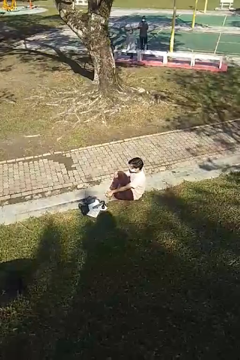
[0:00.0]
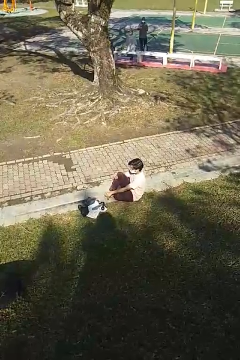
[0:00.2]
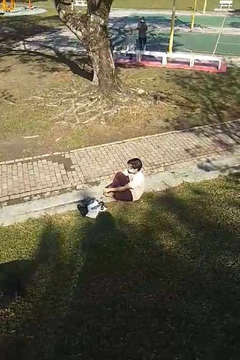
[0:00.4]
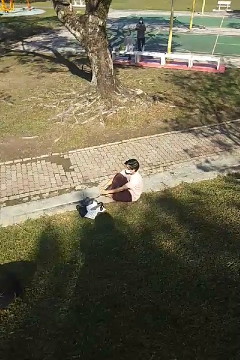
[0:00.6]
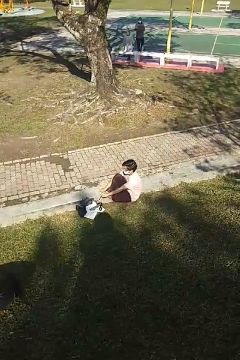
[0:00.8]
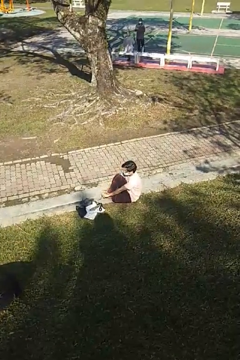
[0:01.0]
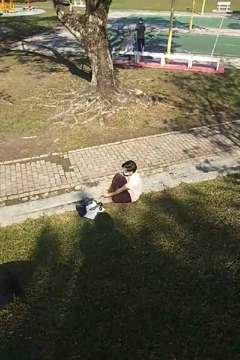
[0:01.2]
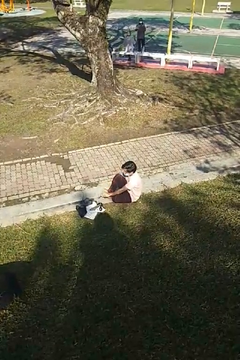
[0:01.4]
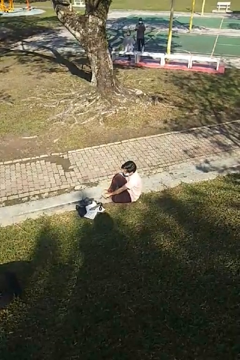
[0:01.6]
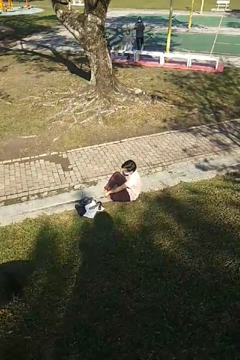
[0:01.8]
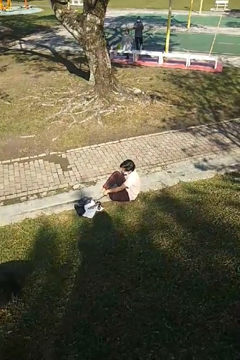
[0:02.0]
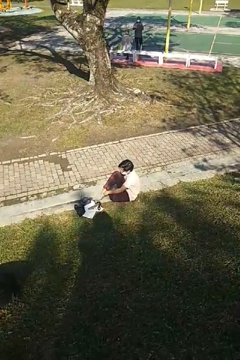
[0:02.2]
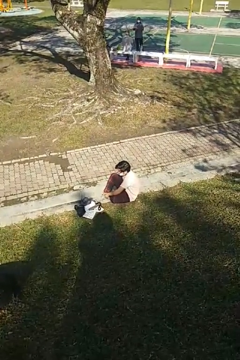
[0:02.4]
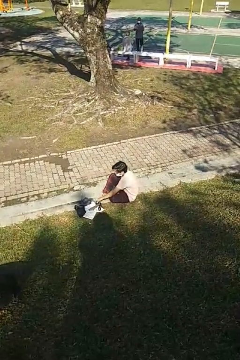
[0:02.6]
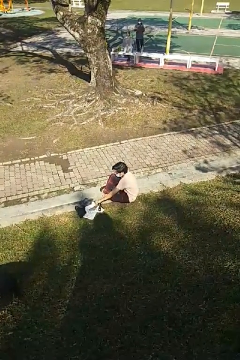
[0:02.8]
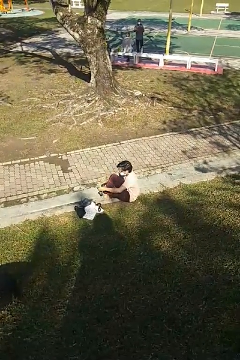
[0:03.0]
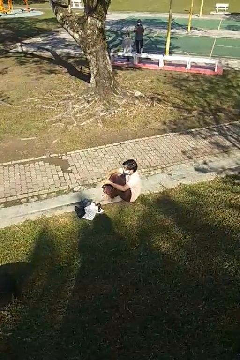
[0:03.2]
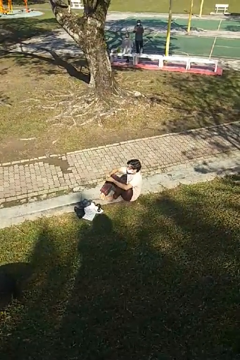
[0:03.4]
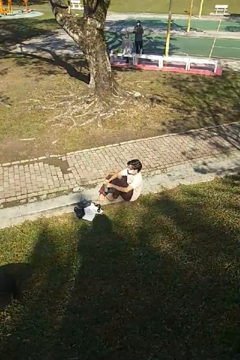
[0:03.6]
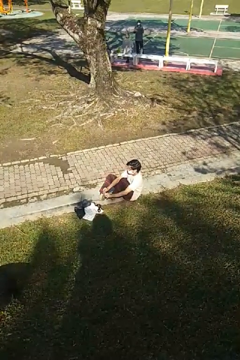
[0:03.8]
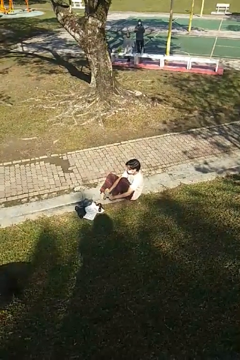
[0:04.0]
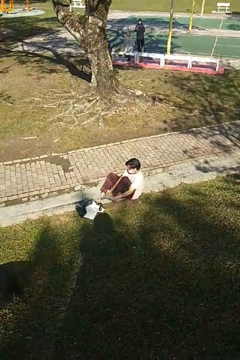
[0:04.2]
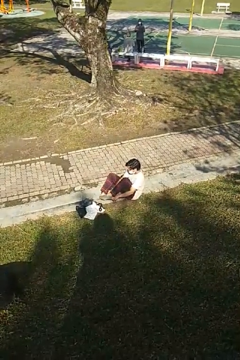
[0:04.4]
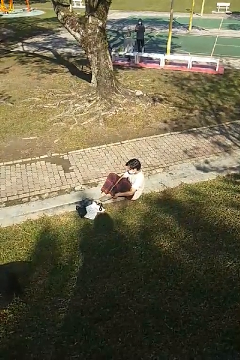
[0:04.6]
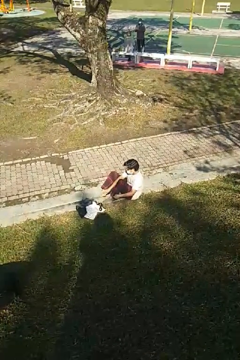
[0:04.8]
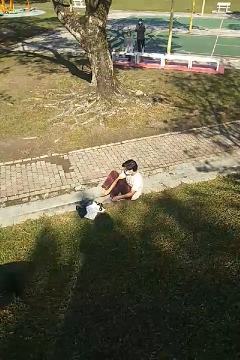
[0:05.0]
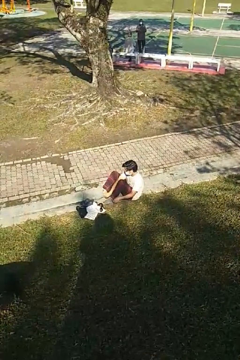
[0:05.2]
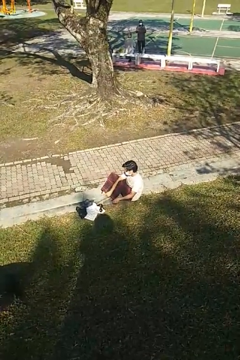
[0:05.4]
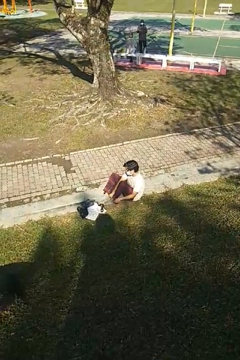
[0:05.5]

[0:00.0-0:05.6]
person puts on socks

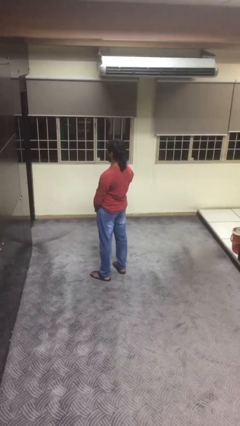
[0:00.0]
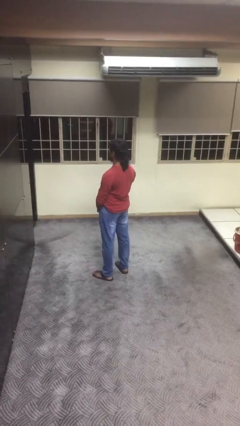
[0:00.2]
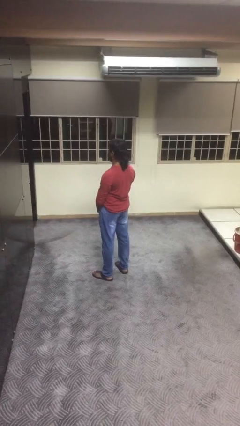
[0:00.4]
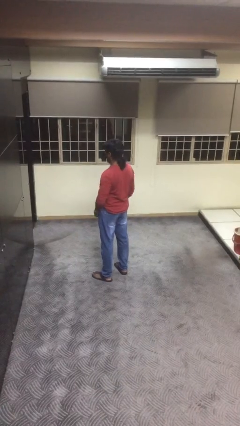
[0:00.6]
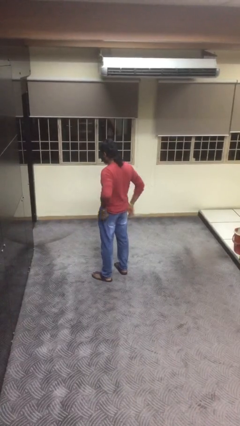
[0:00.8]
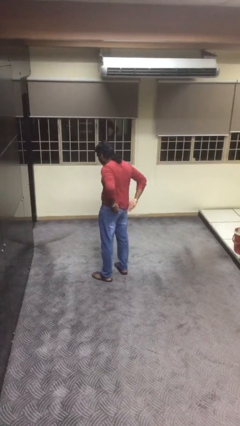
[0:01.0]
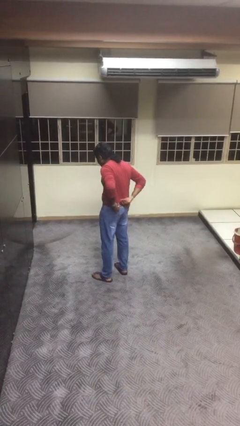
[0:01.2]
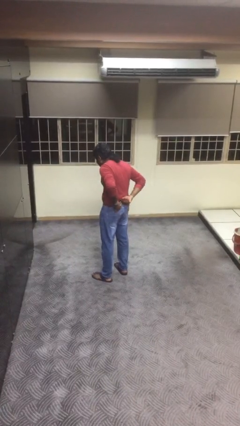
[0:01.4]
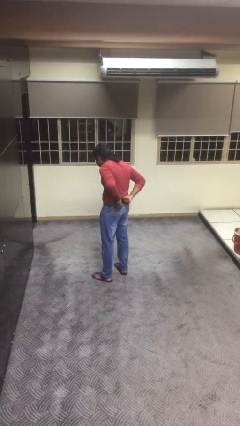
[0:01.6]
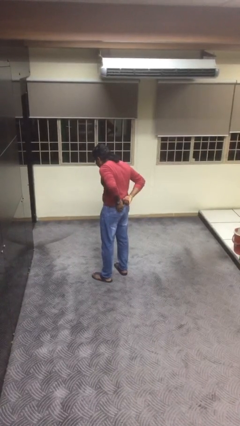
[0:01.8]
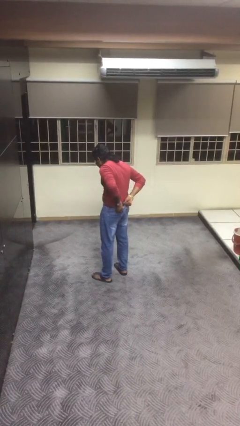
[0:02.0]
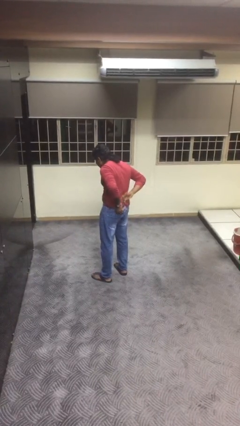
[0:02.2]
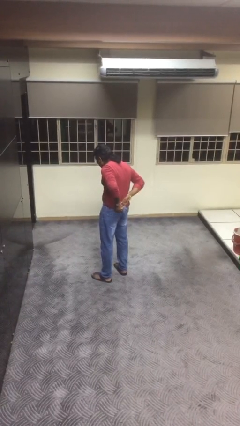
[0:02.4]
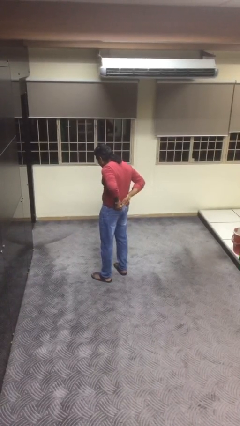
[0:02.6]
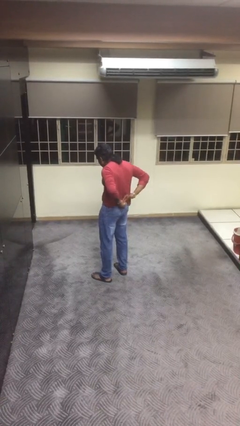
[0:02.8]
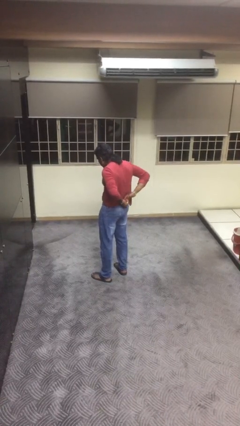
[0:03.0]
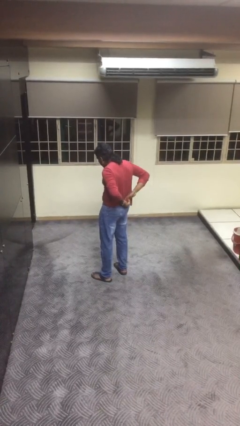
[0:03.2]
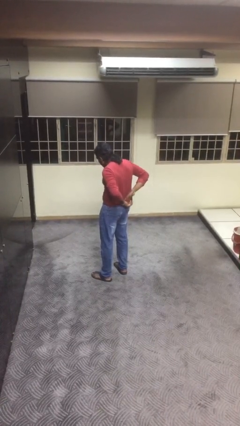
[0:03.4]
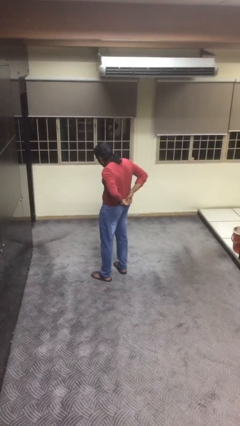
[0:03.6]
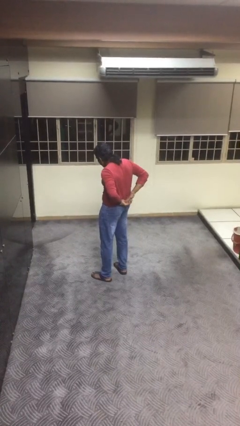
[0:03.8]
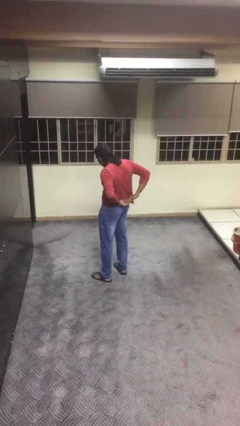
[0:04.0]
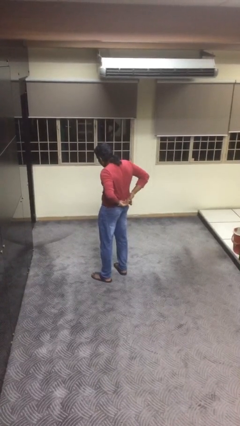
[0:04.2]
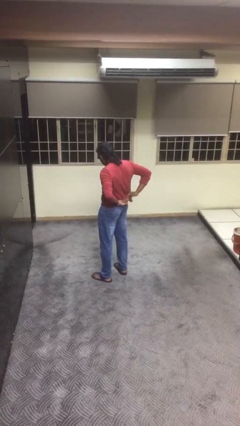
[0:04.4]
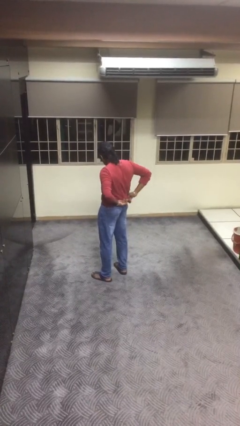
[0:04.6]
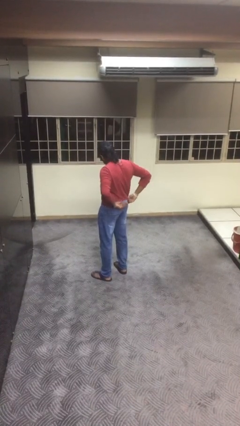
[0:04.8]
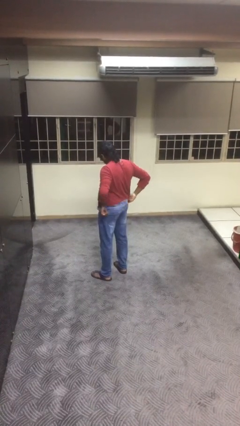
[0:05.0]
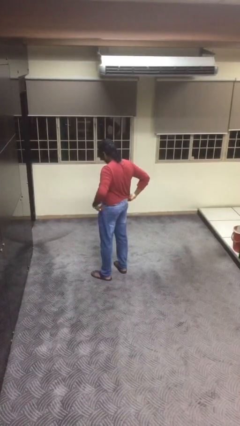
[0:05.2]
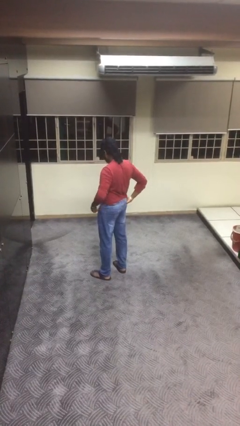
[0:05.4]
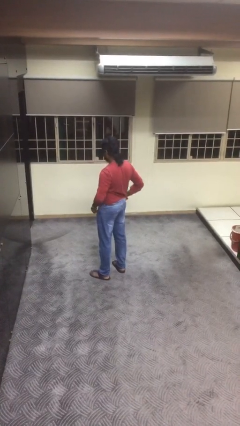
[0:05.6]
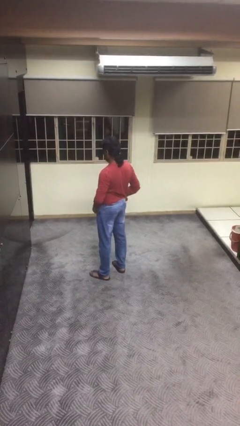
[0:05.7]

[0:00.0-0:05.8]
person tucks in shirt

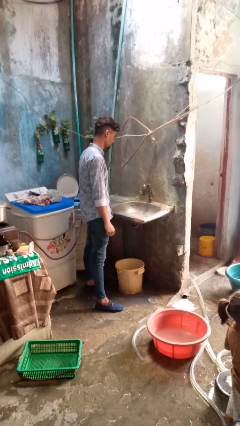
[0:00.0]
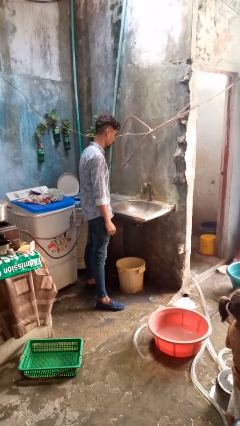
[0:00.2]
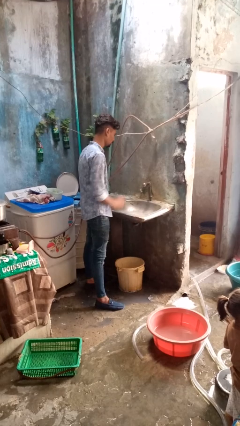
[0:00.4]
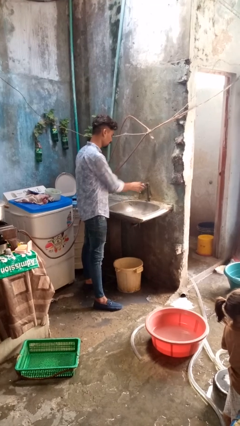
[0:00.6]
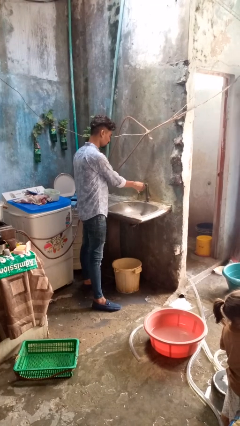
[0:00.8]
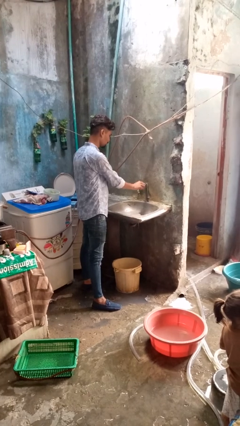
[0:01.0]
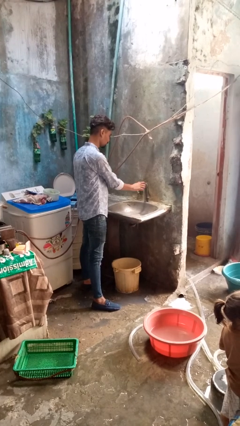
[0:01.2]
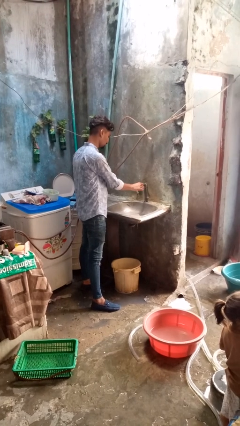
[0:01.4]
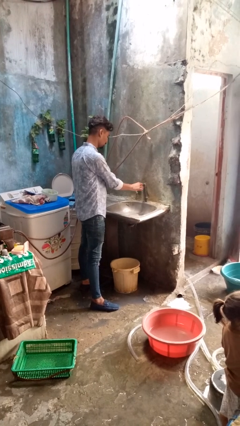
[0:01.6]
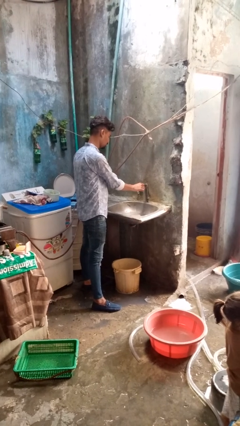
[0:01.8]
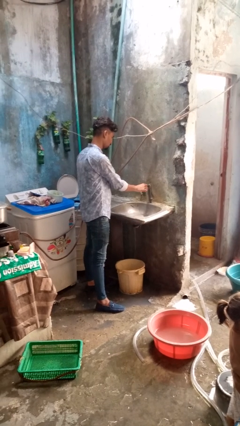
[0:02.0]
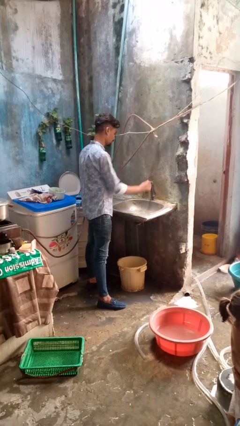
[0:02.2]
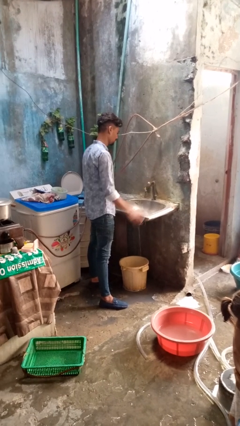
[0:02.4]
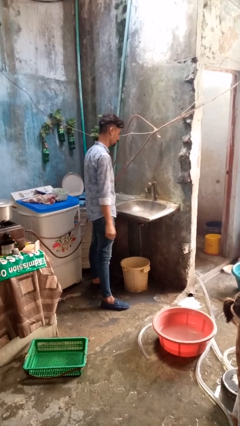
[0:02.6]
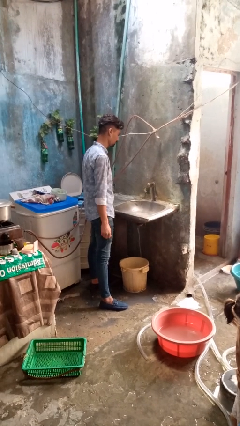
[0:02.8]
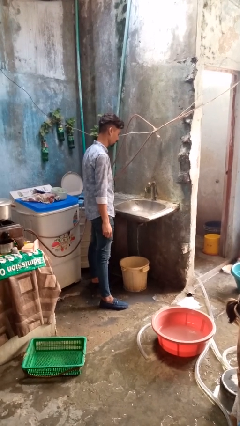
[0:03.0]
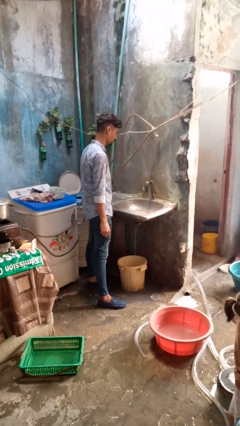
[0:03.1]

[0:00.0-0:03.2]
person turns on faucet

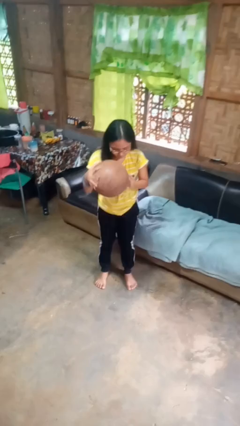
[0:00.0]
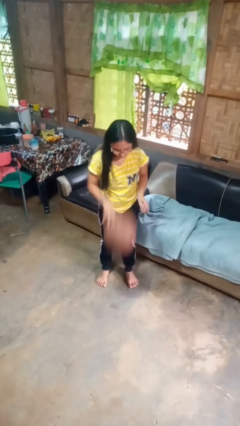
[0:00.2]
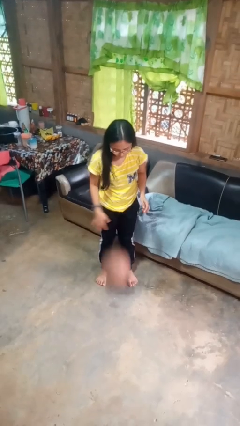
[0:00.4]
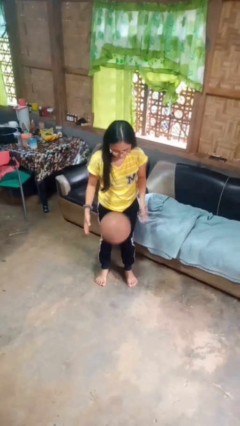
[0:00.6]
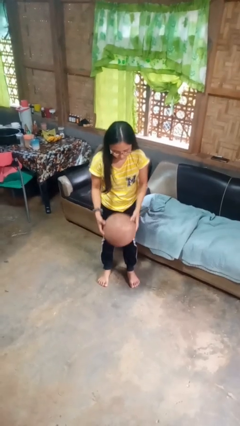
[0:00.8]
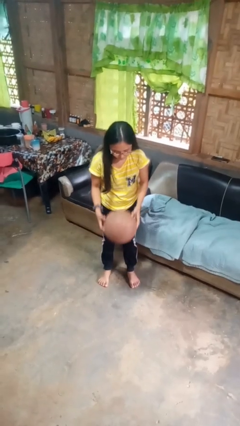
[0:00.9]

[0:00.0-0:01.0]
person bounces ball on floor

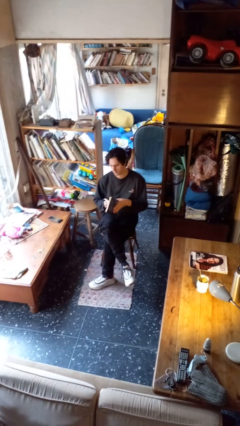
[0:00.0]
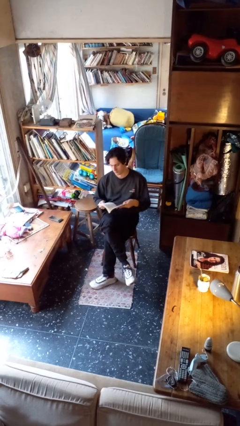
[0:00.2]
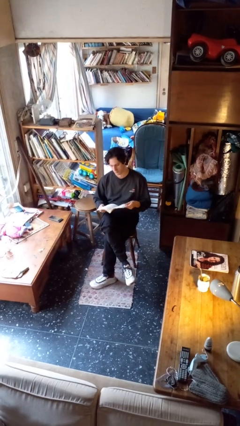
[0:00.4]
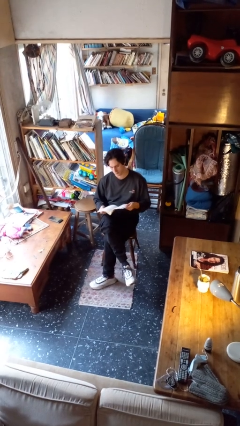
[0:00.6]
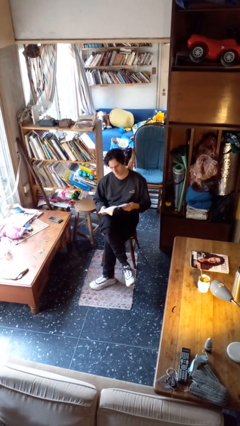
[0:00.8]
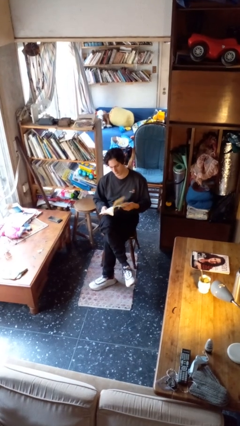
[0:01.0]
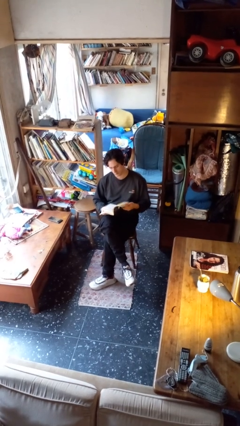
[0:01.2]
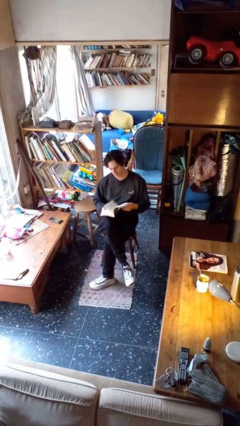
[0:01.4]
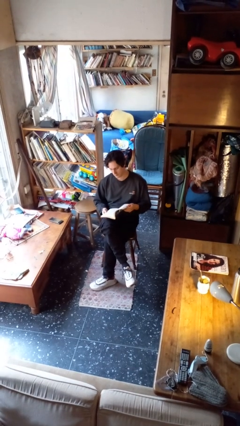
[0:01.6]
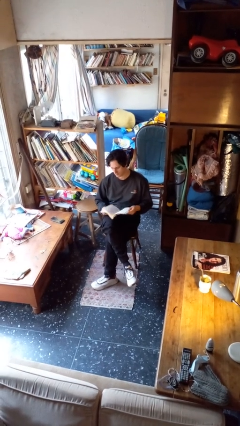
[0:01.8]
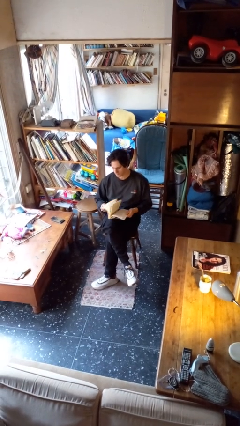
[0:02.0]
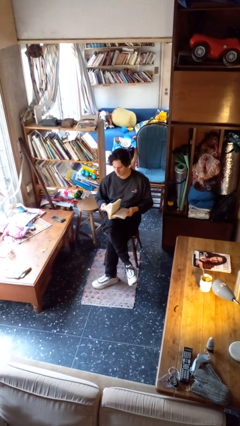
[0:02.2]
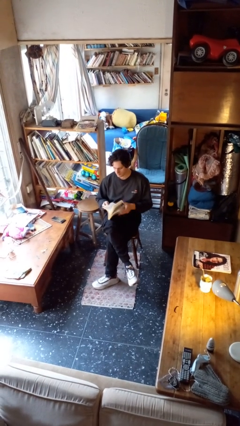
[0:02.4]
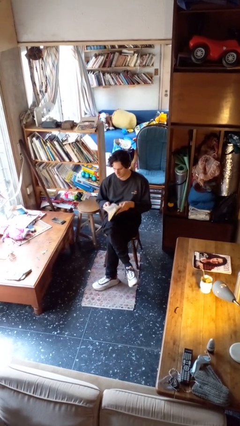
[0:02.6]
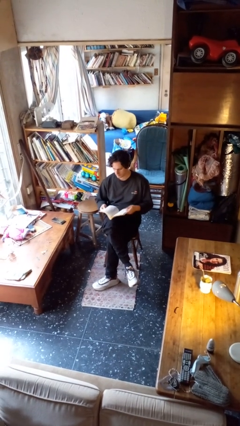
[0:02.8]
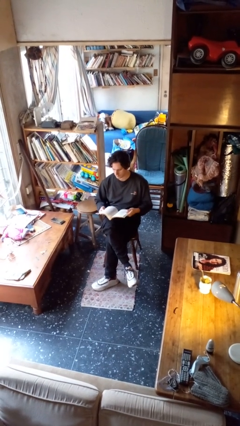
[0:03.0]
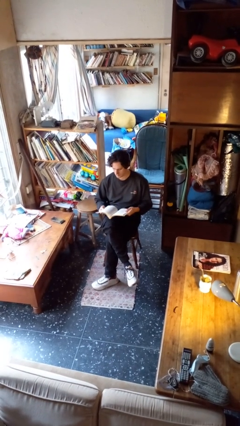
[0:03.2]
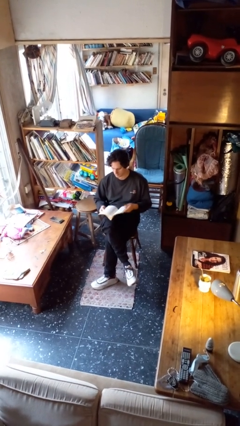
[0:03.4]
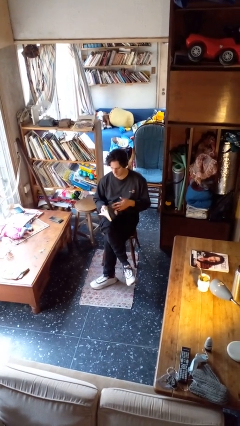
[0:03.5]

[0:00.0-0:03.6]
person reads book
